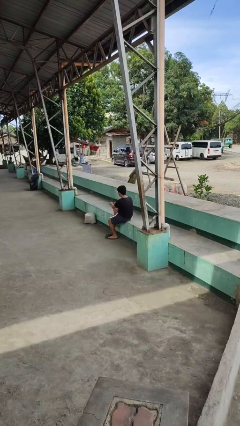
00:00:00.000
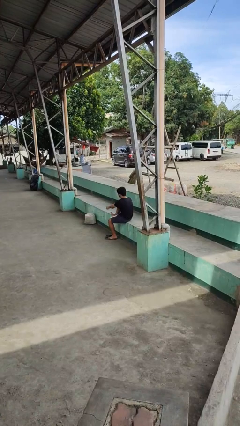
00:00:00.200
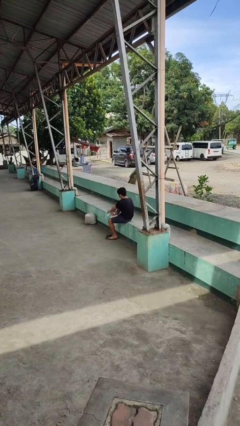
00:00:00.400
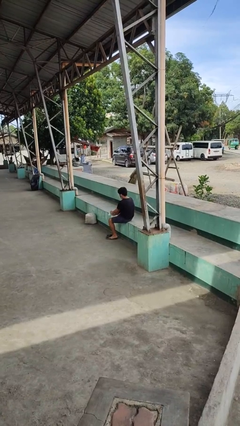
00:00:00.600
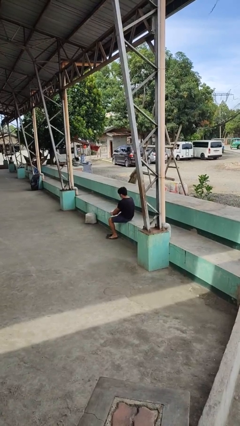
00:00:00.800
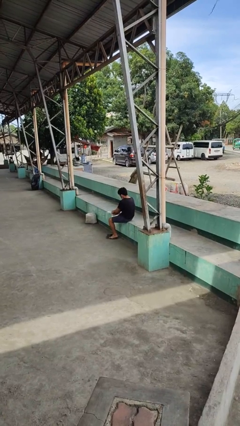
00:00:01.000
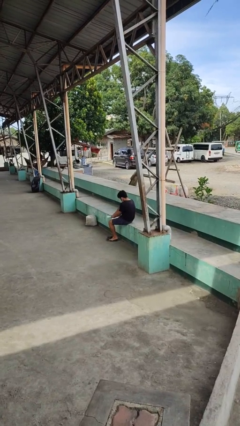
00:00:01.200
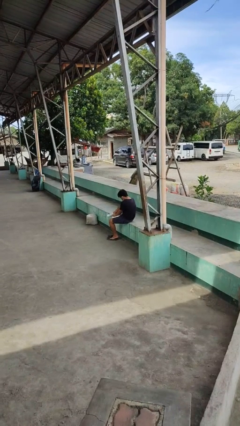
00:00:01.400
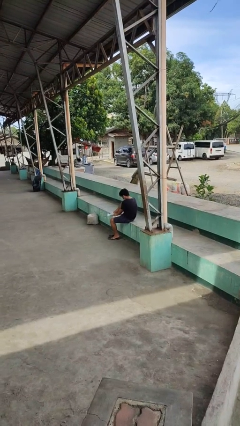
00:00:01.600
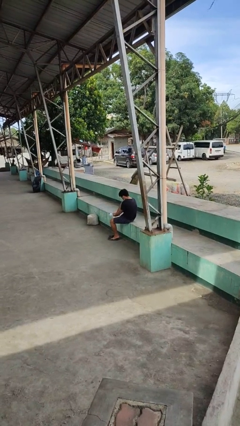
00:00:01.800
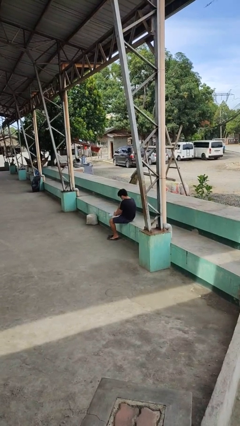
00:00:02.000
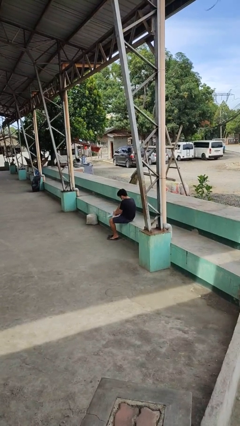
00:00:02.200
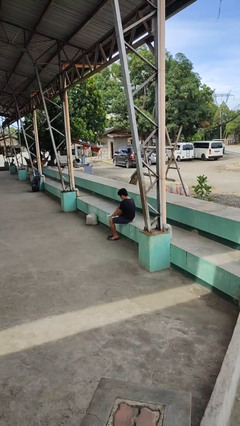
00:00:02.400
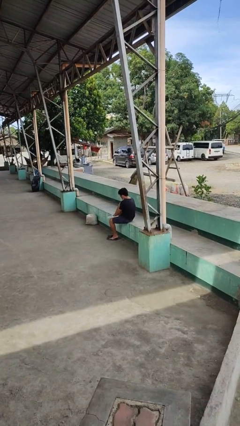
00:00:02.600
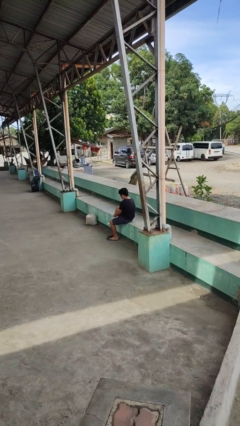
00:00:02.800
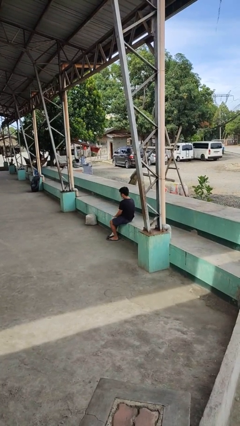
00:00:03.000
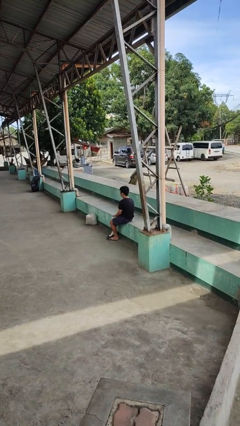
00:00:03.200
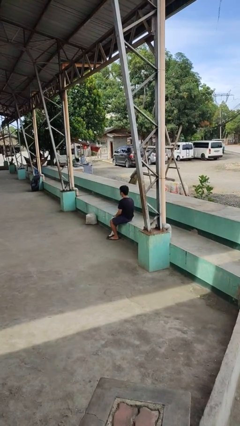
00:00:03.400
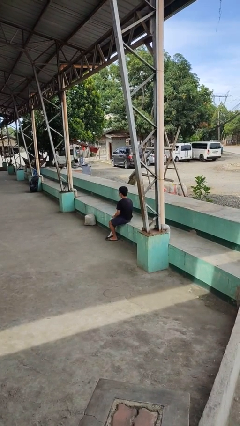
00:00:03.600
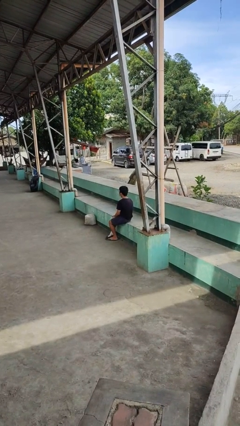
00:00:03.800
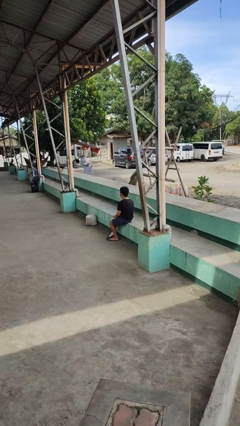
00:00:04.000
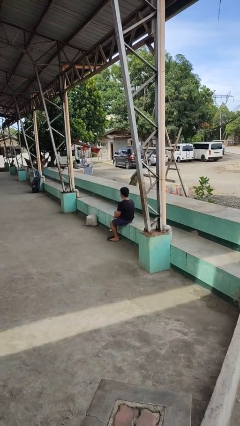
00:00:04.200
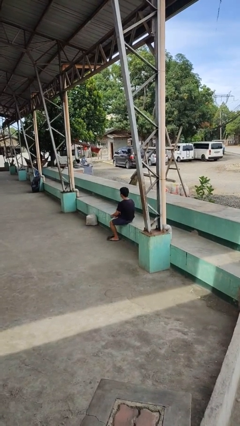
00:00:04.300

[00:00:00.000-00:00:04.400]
person puts on socks

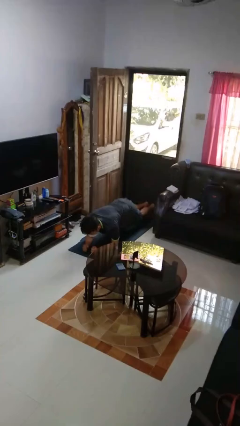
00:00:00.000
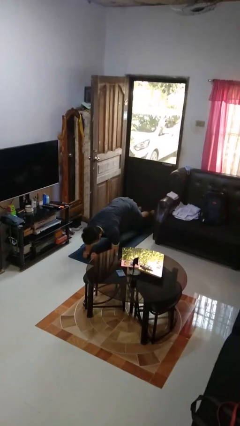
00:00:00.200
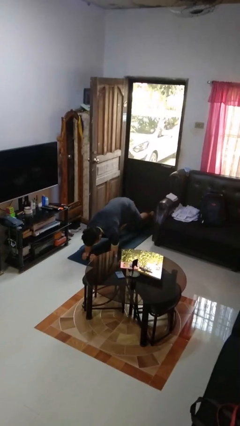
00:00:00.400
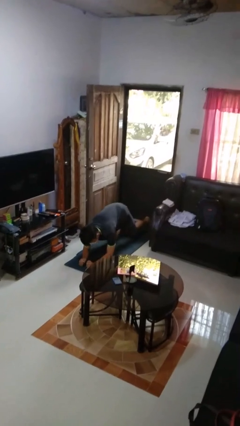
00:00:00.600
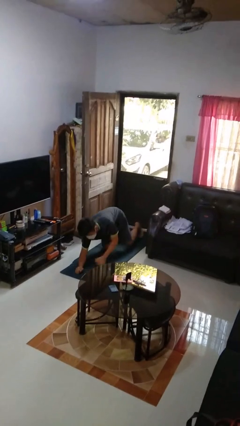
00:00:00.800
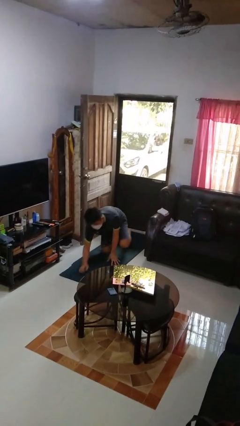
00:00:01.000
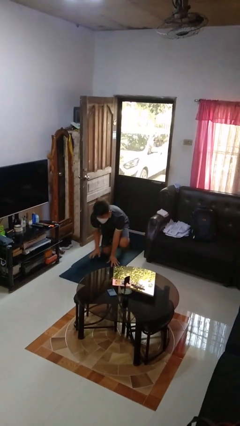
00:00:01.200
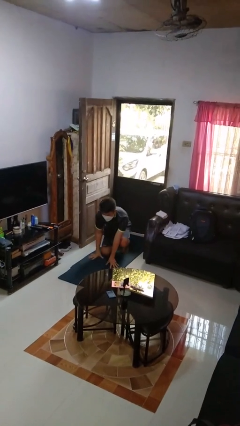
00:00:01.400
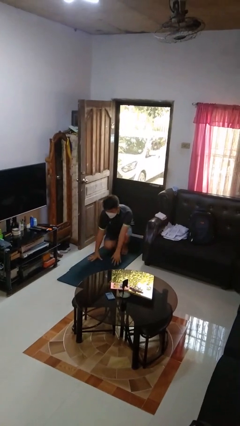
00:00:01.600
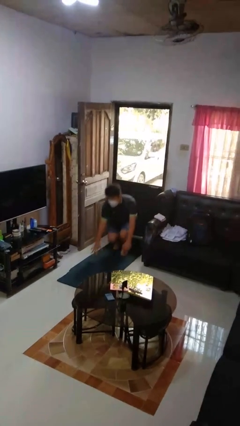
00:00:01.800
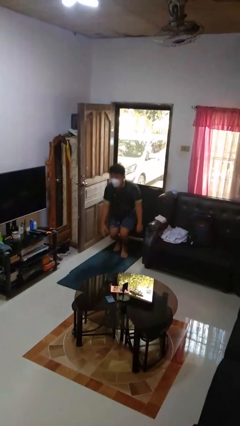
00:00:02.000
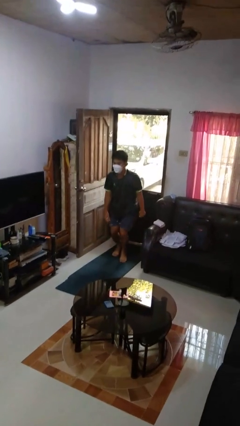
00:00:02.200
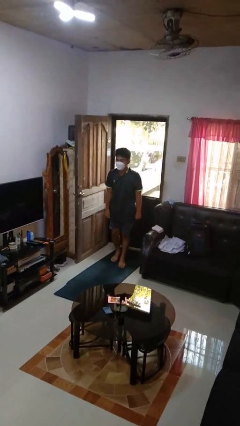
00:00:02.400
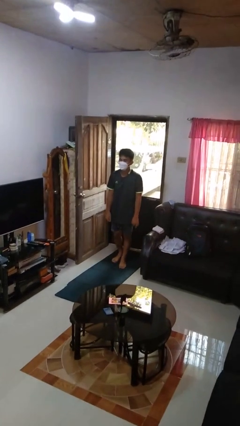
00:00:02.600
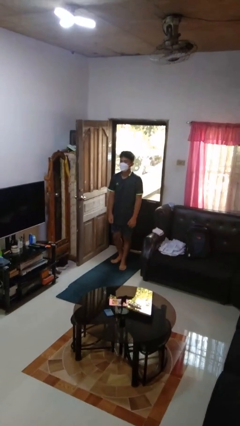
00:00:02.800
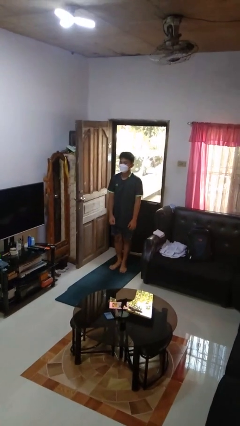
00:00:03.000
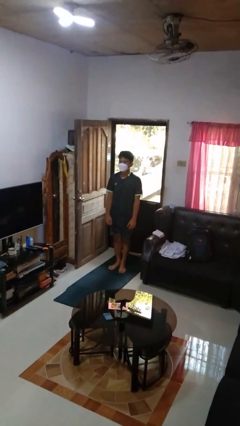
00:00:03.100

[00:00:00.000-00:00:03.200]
person stands up from floor

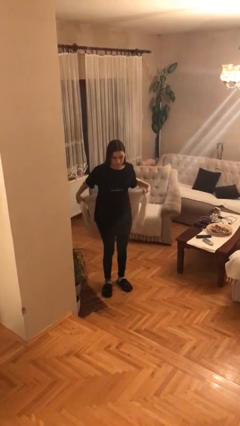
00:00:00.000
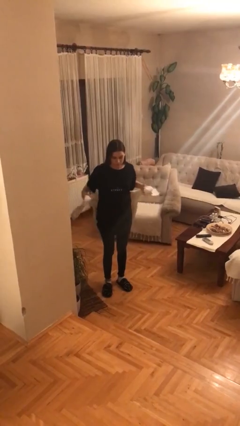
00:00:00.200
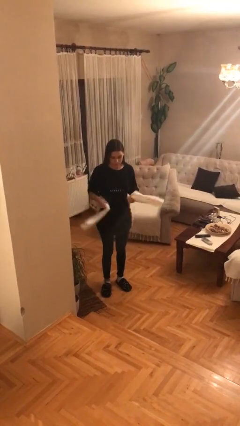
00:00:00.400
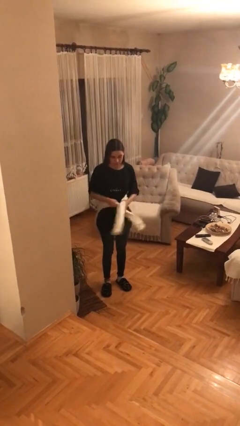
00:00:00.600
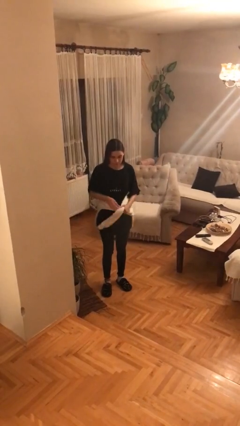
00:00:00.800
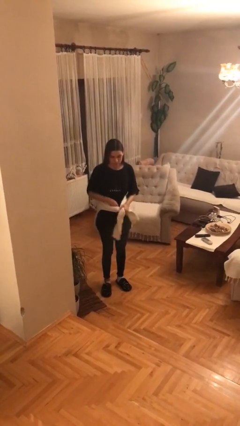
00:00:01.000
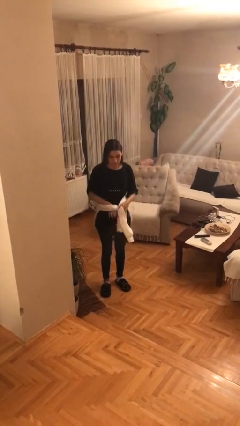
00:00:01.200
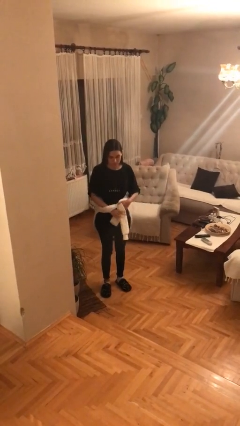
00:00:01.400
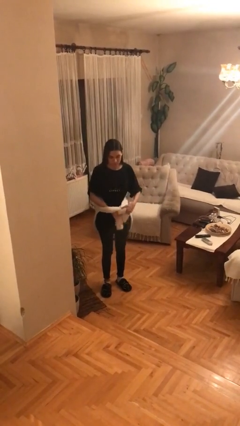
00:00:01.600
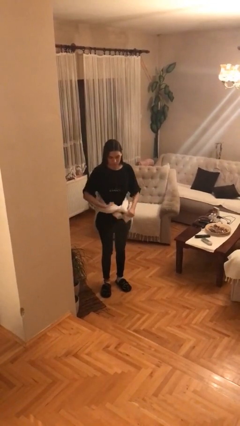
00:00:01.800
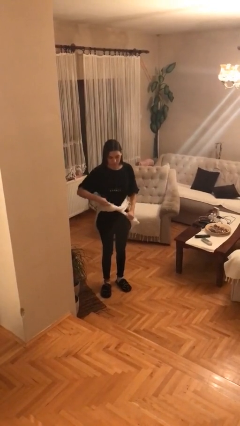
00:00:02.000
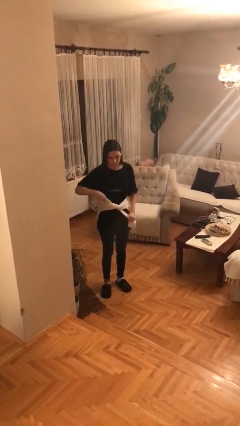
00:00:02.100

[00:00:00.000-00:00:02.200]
person ties jacket around waist

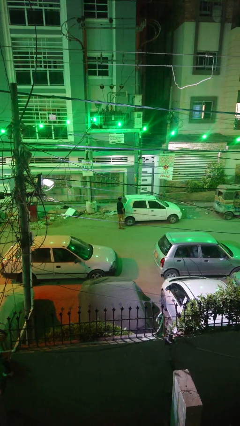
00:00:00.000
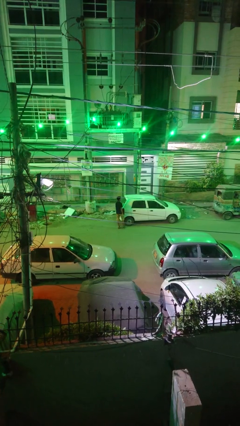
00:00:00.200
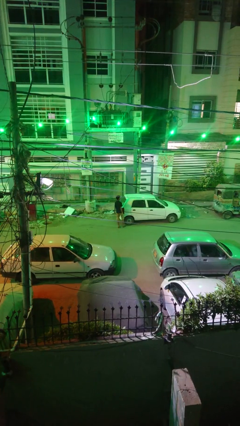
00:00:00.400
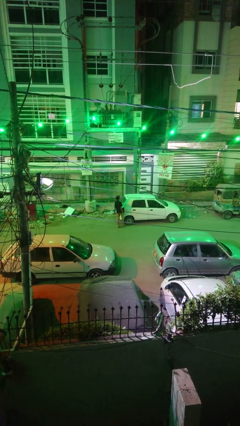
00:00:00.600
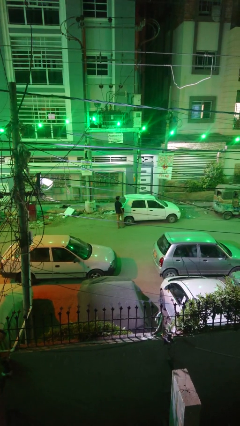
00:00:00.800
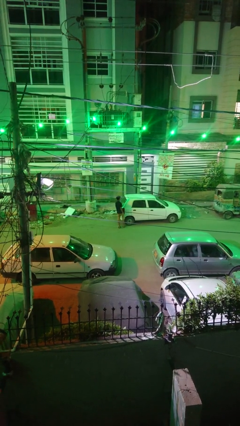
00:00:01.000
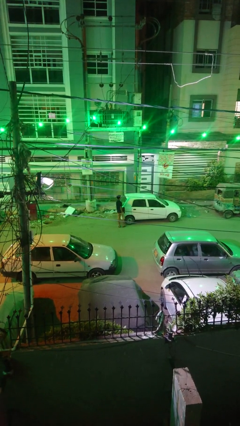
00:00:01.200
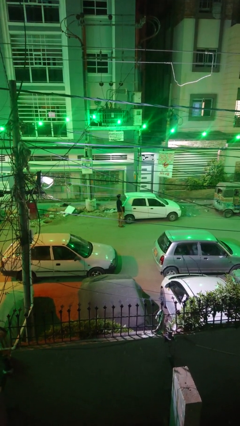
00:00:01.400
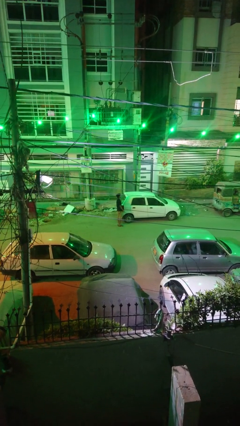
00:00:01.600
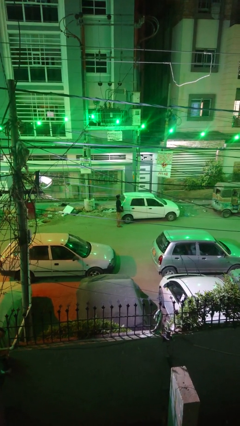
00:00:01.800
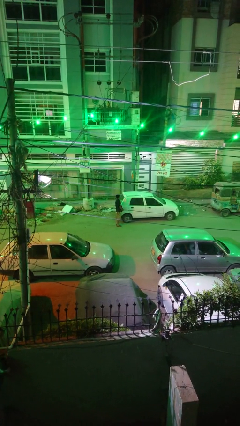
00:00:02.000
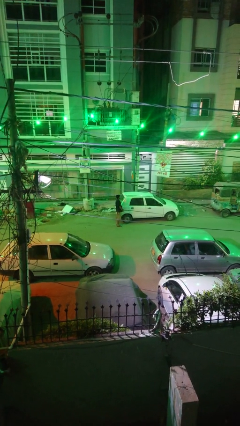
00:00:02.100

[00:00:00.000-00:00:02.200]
person kicks car tires

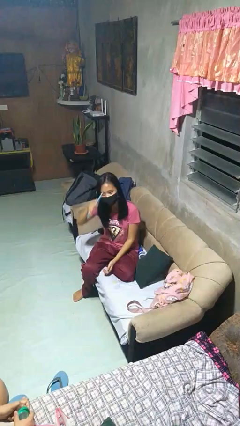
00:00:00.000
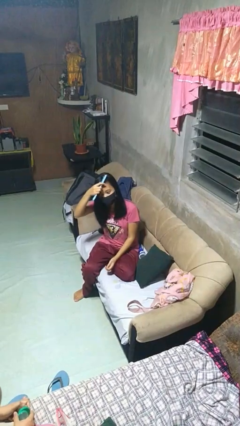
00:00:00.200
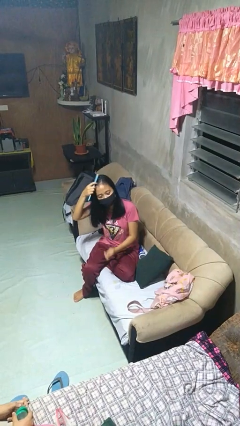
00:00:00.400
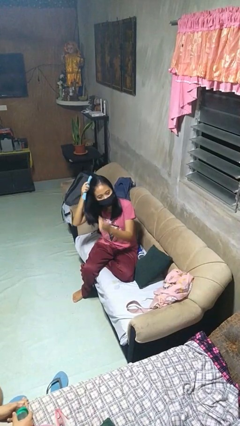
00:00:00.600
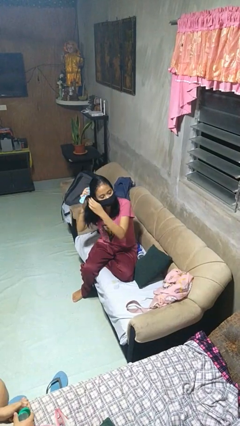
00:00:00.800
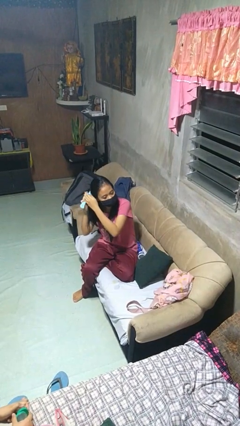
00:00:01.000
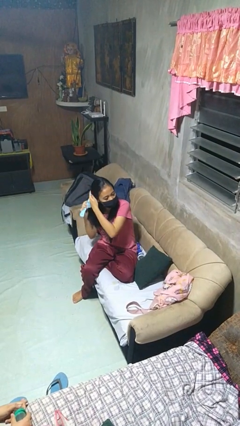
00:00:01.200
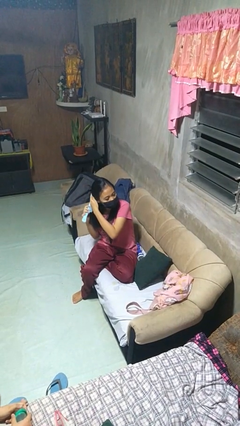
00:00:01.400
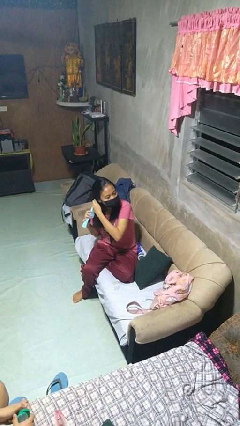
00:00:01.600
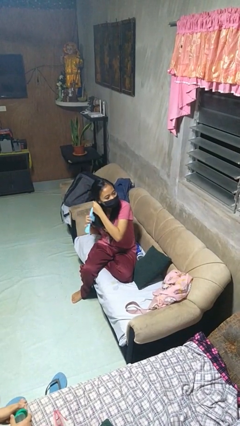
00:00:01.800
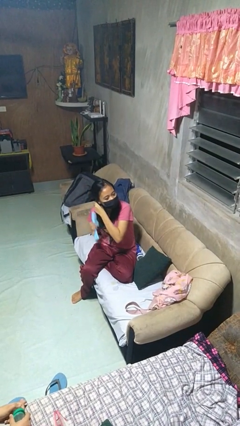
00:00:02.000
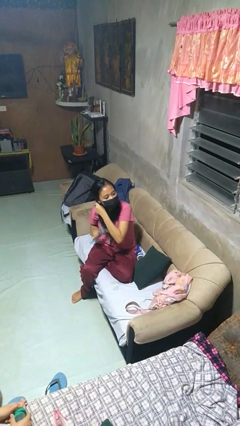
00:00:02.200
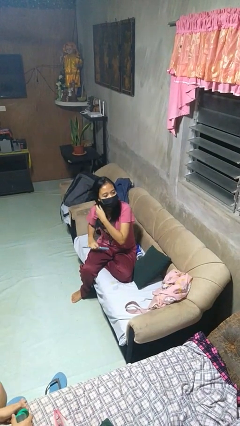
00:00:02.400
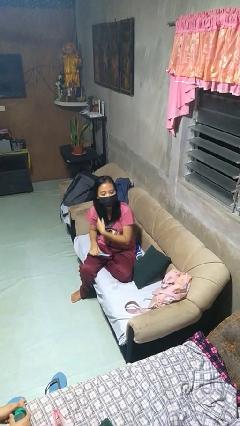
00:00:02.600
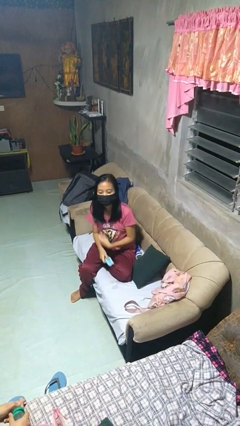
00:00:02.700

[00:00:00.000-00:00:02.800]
person brushes hair

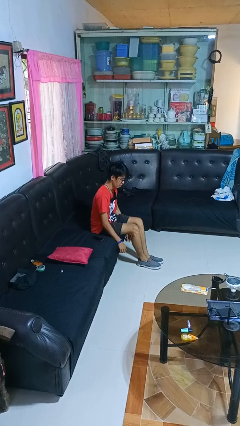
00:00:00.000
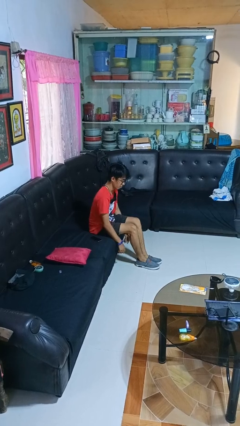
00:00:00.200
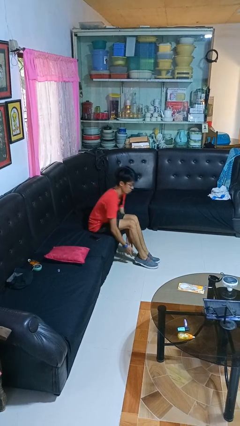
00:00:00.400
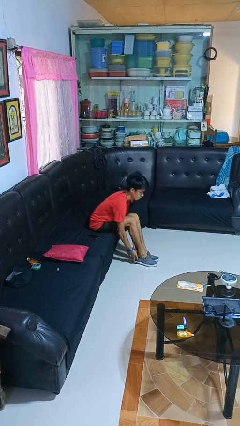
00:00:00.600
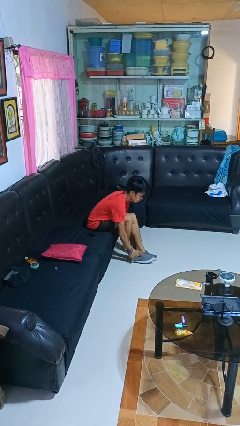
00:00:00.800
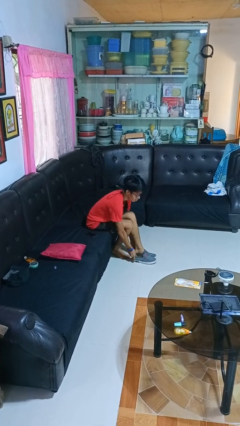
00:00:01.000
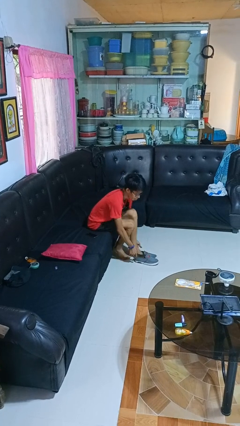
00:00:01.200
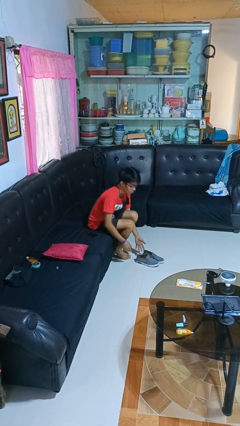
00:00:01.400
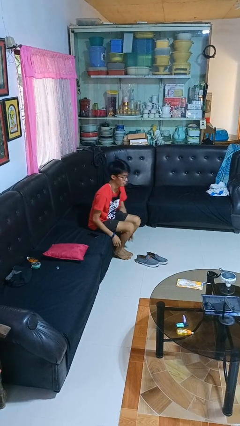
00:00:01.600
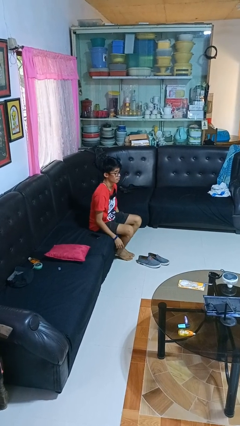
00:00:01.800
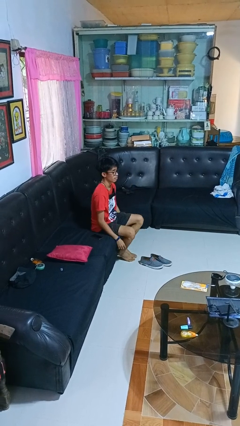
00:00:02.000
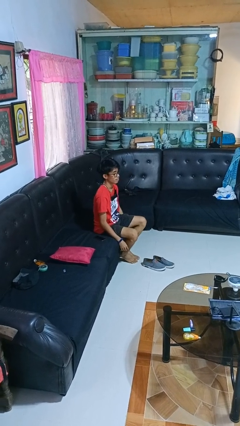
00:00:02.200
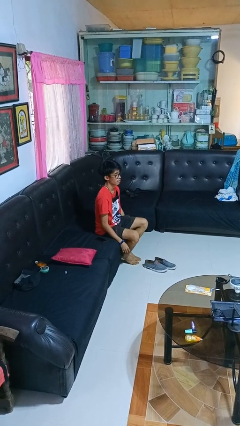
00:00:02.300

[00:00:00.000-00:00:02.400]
person takes off shoes

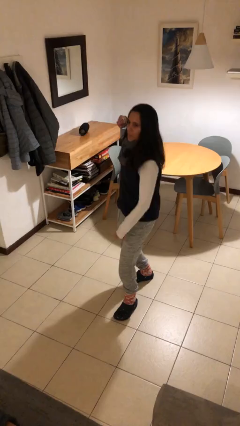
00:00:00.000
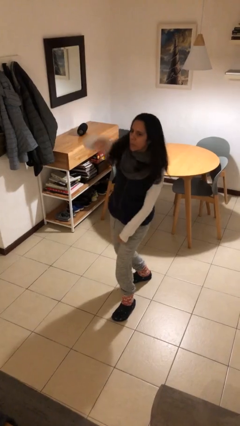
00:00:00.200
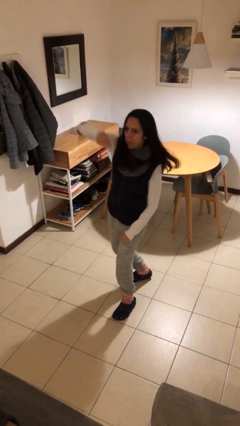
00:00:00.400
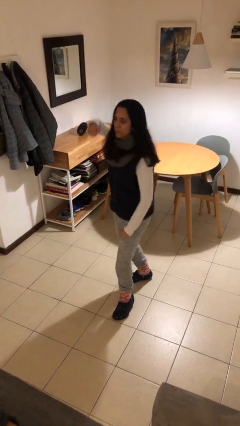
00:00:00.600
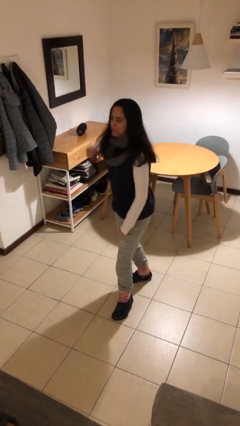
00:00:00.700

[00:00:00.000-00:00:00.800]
person punches
